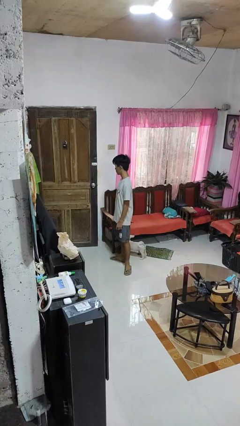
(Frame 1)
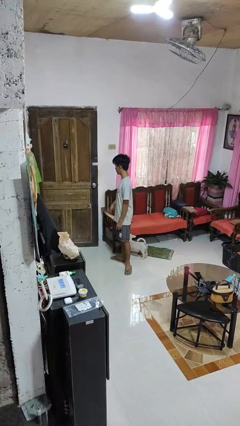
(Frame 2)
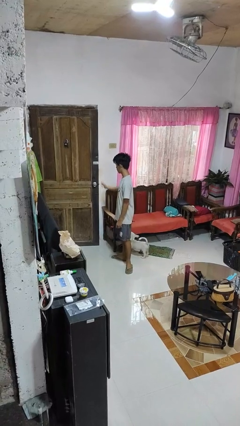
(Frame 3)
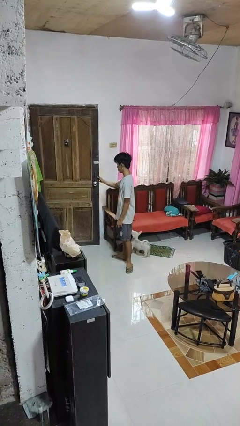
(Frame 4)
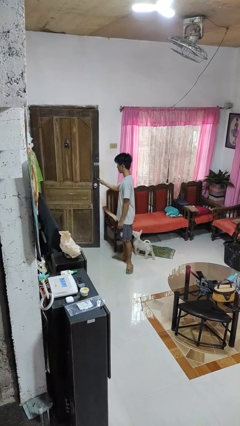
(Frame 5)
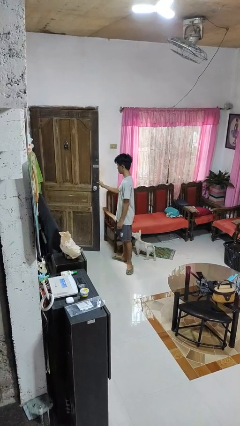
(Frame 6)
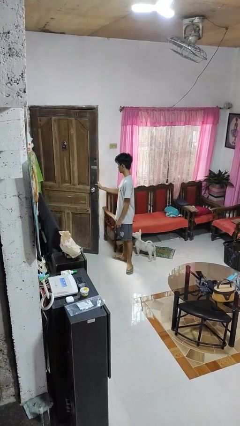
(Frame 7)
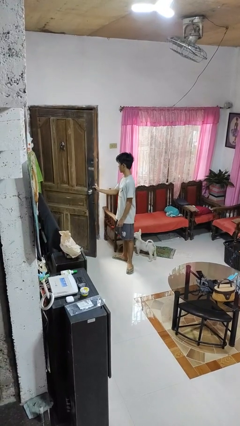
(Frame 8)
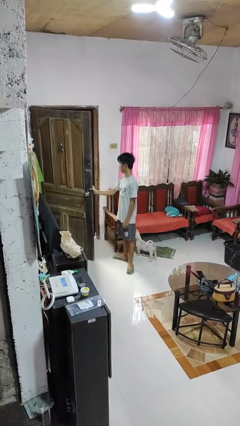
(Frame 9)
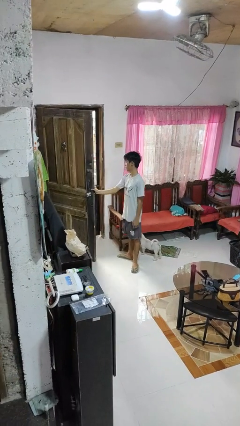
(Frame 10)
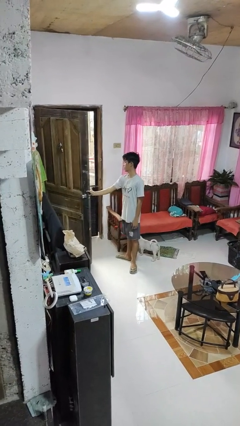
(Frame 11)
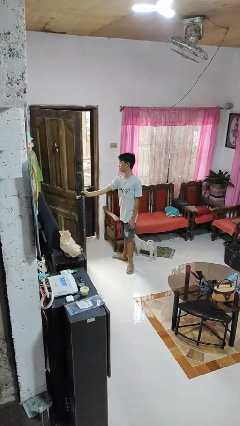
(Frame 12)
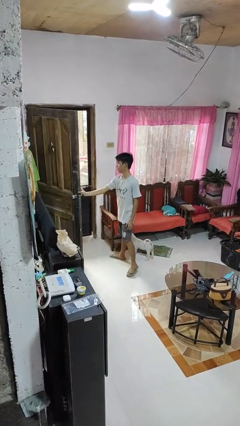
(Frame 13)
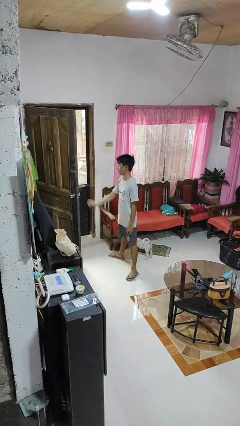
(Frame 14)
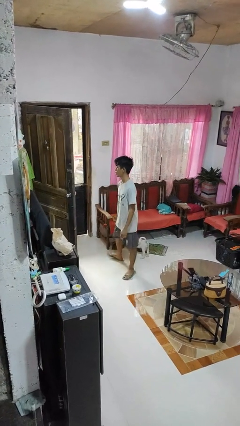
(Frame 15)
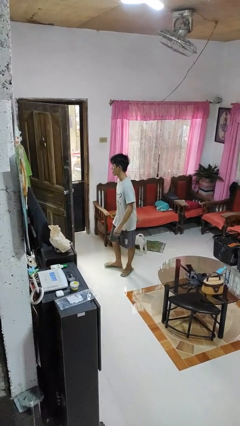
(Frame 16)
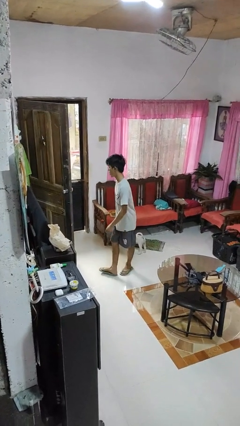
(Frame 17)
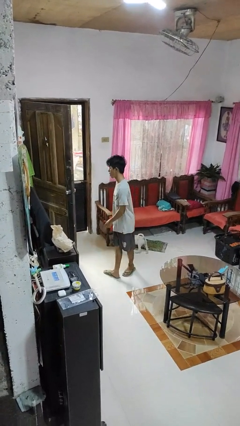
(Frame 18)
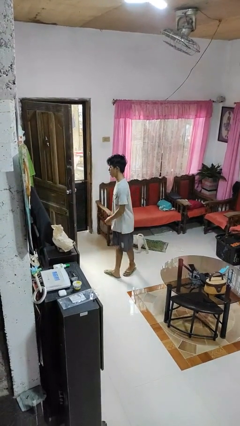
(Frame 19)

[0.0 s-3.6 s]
person opens facility door

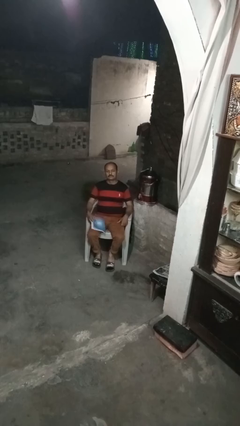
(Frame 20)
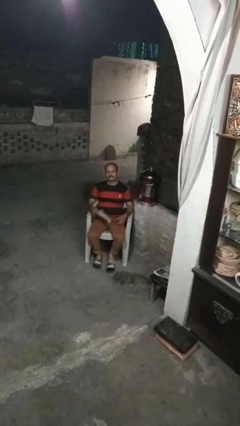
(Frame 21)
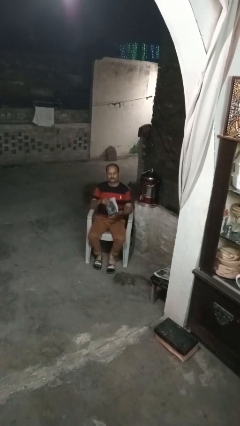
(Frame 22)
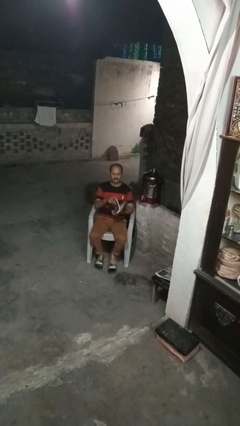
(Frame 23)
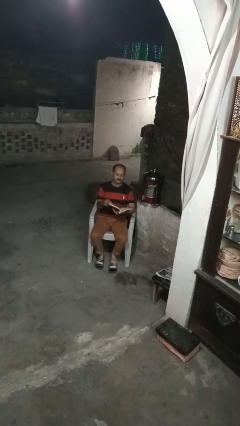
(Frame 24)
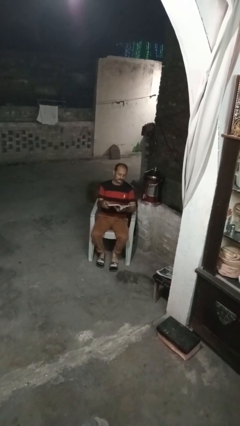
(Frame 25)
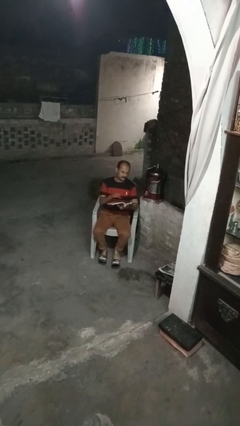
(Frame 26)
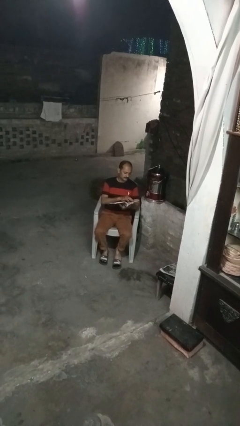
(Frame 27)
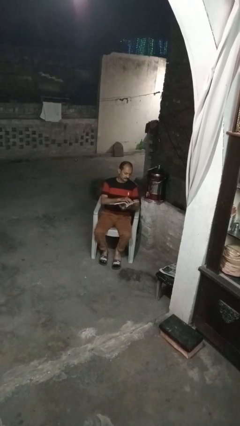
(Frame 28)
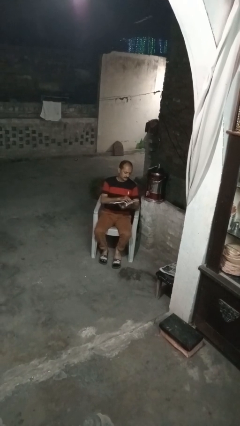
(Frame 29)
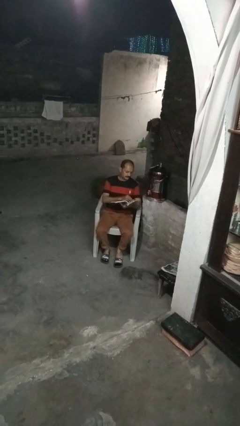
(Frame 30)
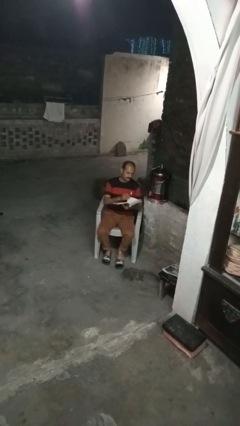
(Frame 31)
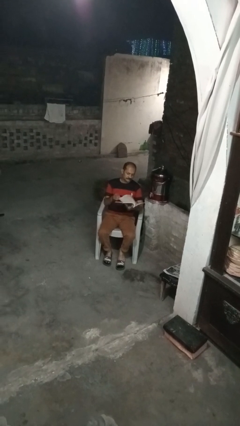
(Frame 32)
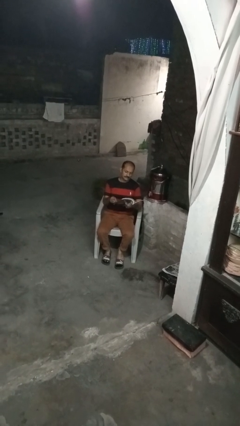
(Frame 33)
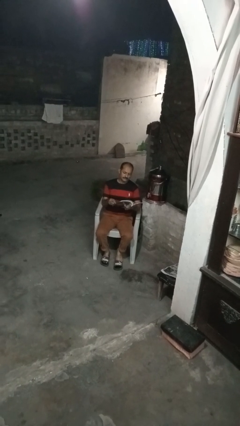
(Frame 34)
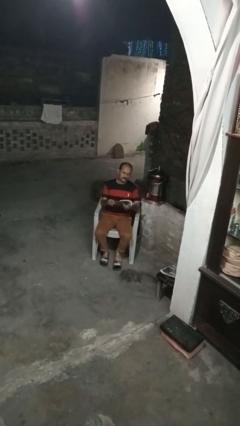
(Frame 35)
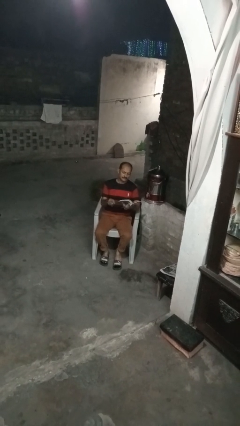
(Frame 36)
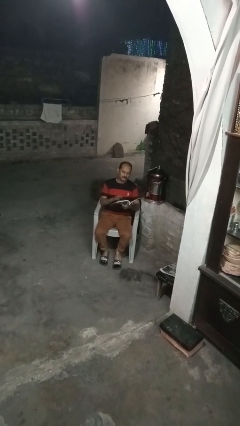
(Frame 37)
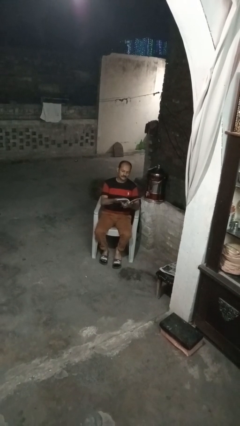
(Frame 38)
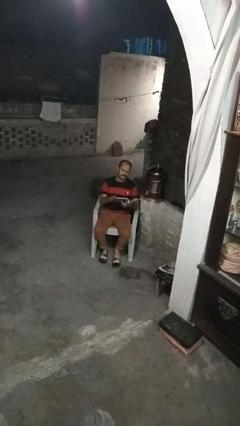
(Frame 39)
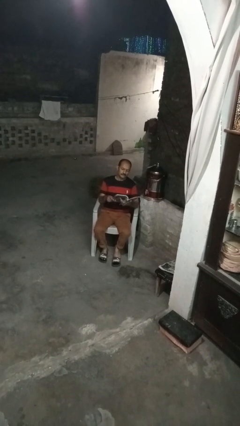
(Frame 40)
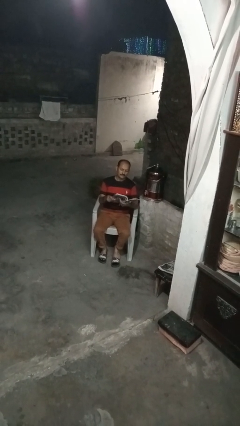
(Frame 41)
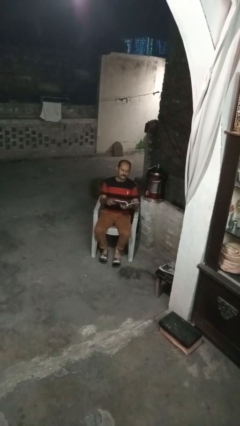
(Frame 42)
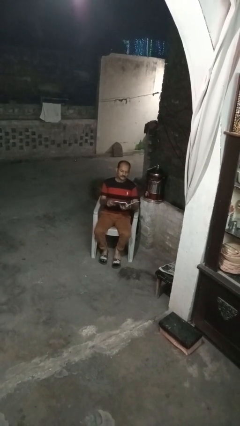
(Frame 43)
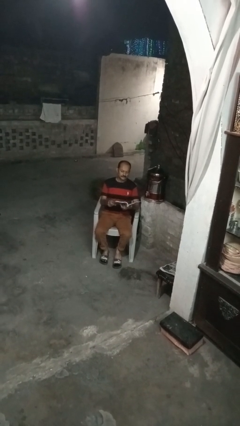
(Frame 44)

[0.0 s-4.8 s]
person reads book

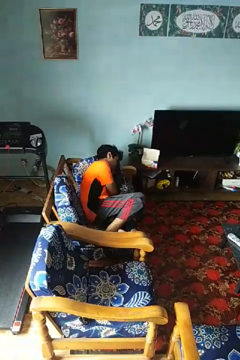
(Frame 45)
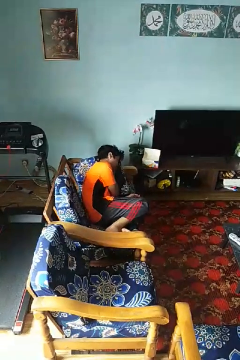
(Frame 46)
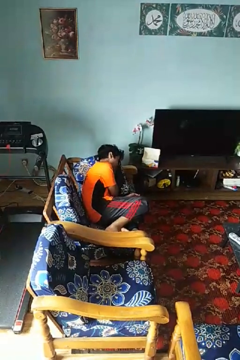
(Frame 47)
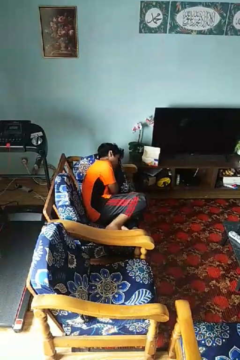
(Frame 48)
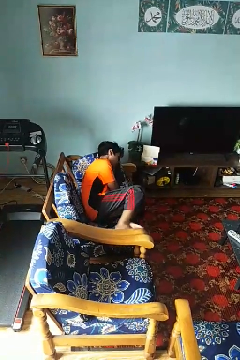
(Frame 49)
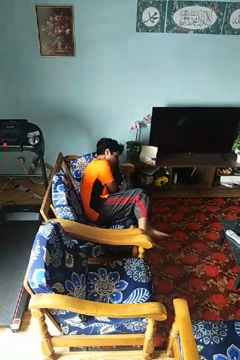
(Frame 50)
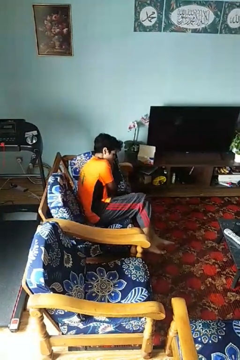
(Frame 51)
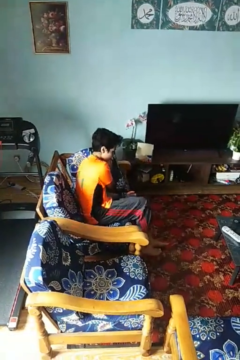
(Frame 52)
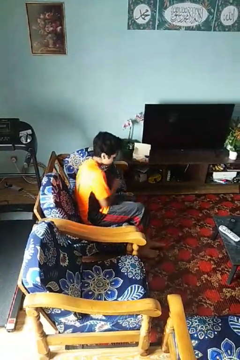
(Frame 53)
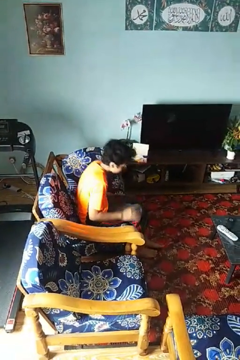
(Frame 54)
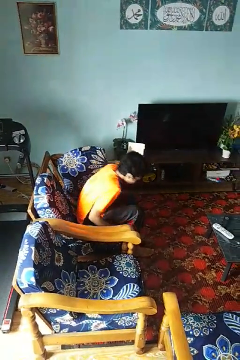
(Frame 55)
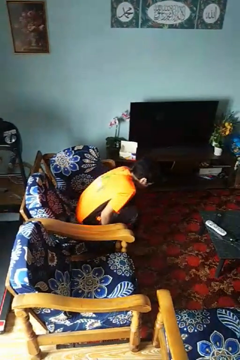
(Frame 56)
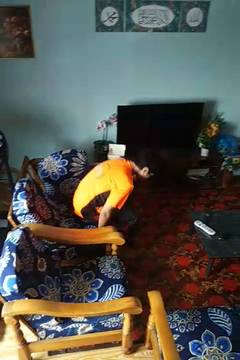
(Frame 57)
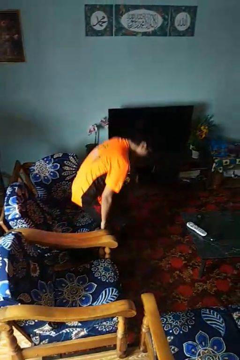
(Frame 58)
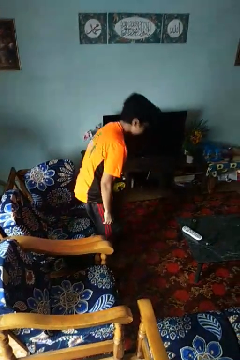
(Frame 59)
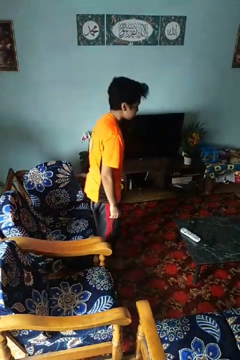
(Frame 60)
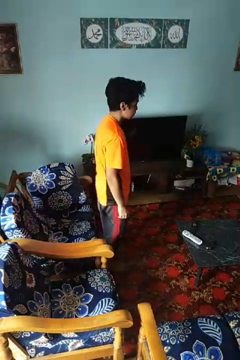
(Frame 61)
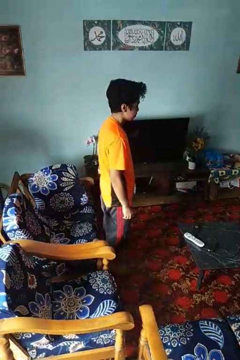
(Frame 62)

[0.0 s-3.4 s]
person stands up

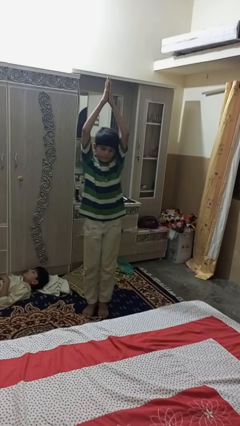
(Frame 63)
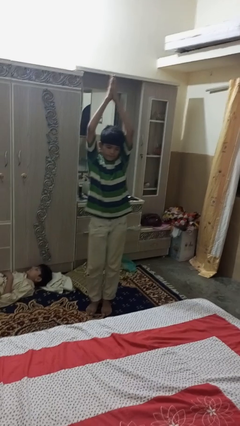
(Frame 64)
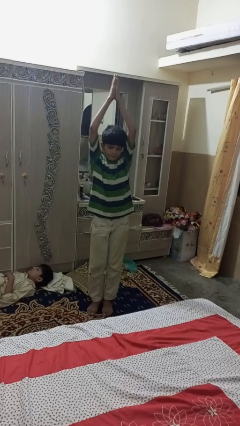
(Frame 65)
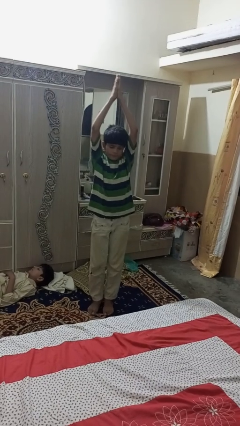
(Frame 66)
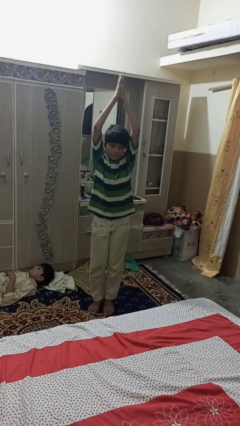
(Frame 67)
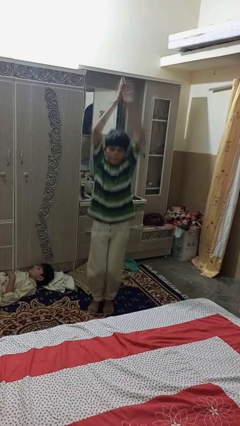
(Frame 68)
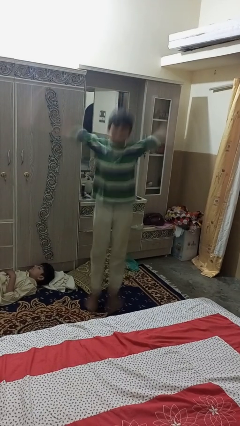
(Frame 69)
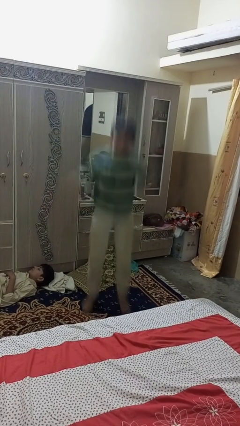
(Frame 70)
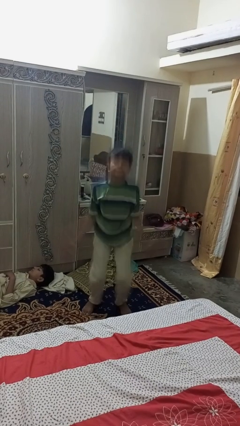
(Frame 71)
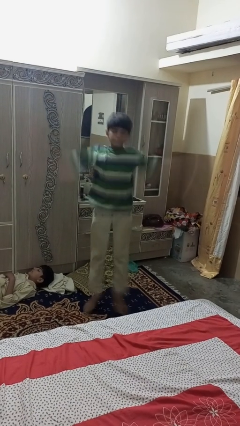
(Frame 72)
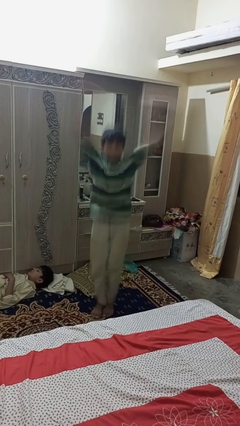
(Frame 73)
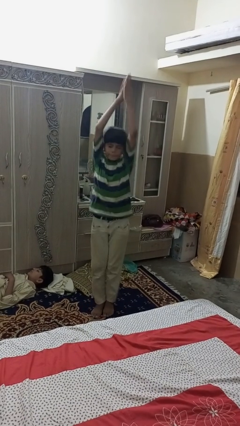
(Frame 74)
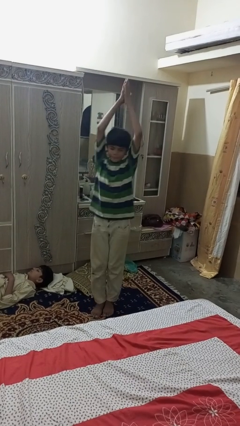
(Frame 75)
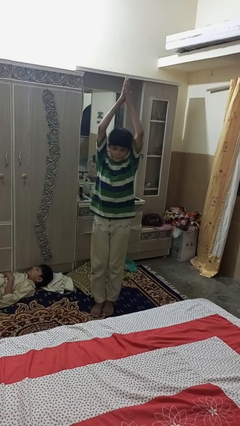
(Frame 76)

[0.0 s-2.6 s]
person exercises with jumping jacks

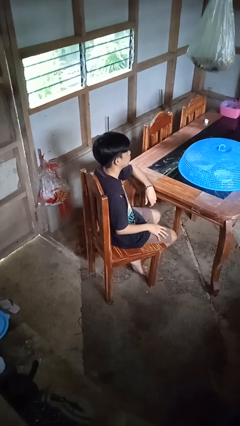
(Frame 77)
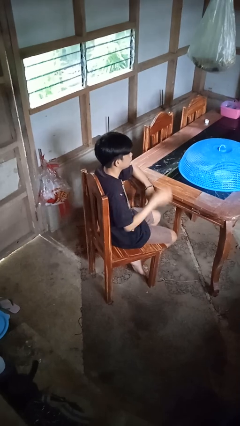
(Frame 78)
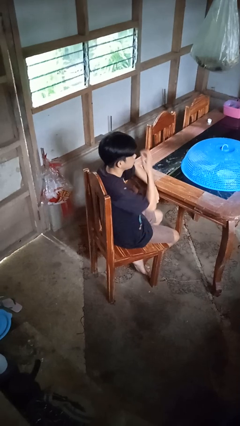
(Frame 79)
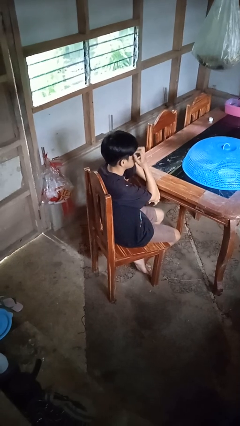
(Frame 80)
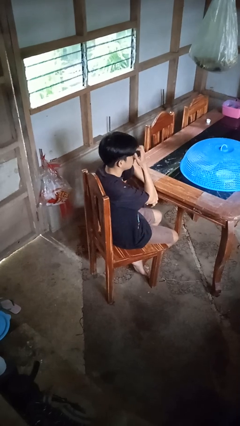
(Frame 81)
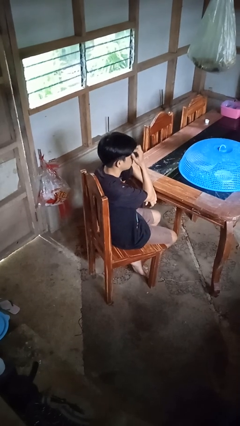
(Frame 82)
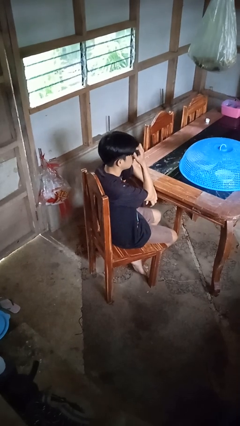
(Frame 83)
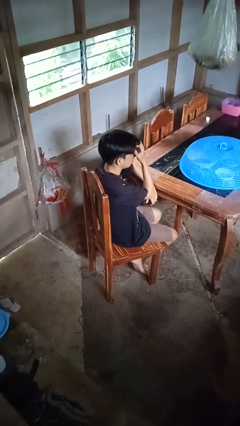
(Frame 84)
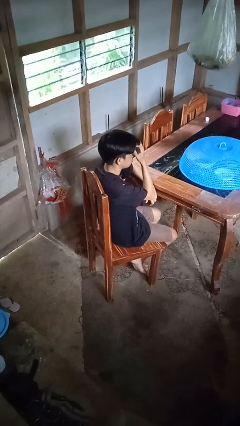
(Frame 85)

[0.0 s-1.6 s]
person scratches face

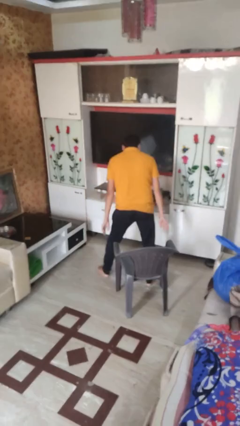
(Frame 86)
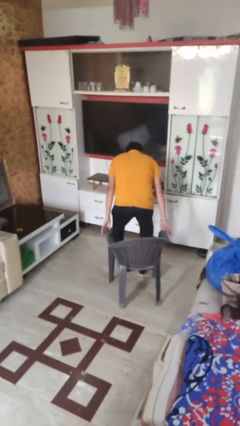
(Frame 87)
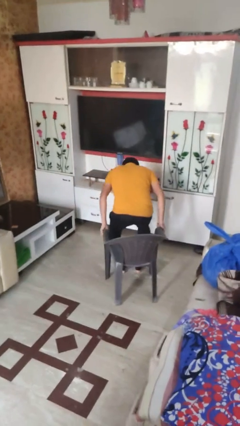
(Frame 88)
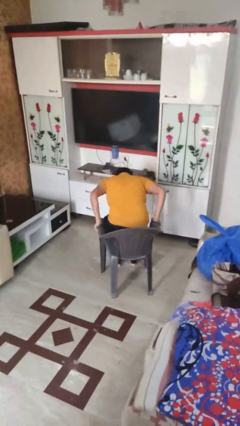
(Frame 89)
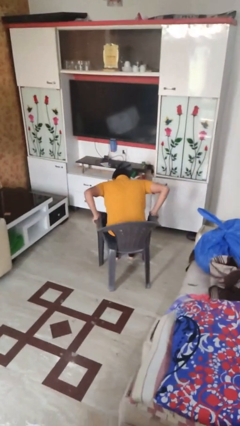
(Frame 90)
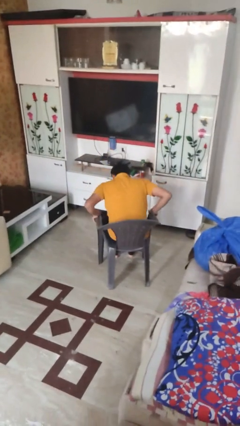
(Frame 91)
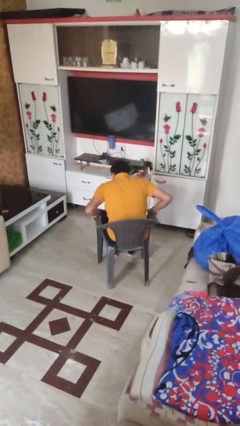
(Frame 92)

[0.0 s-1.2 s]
person sits down

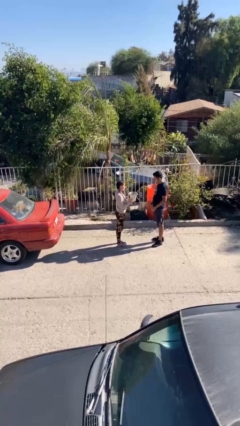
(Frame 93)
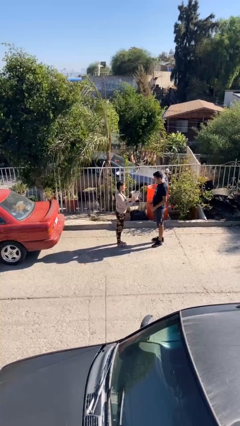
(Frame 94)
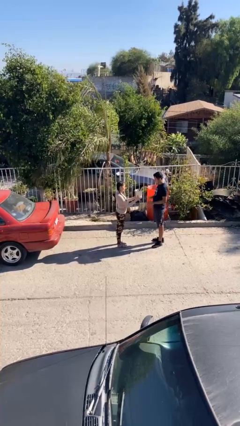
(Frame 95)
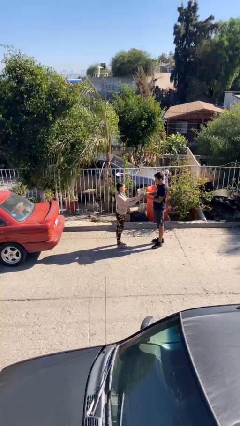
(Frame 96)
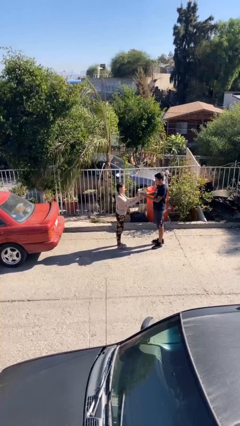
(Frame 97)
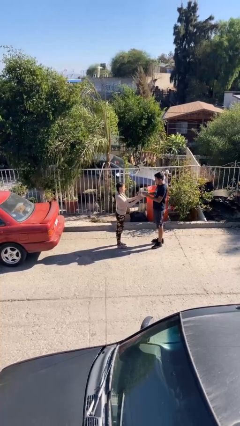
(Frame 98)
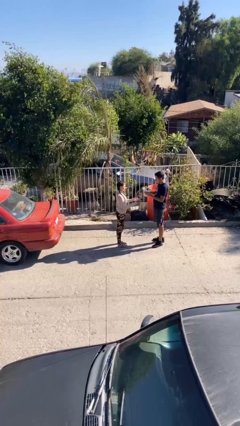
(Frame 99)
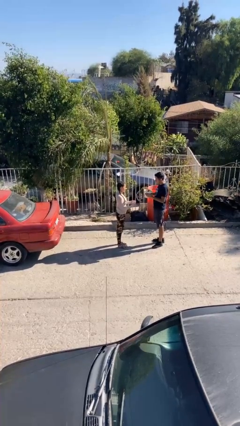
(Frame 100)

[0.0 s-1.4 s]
person transfers object to person
